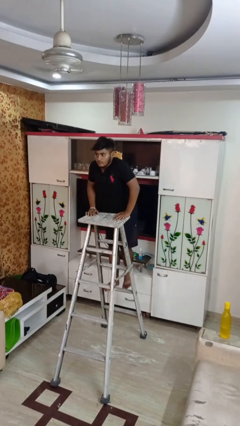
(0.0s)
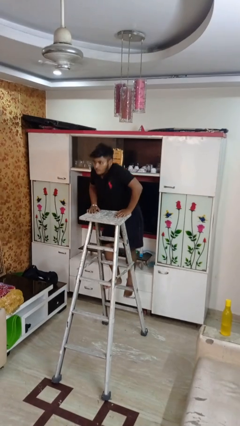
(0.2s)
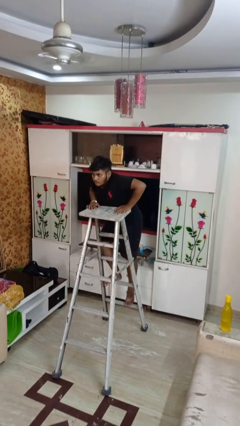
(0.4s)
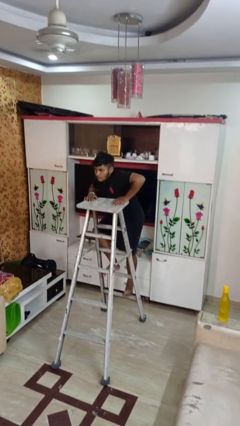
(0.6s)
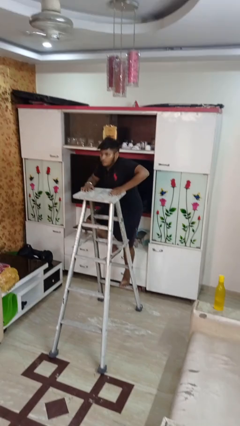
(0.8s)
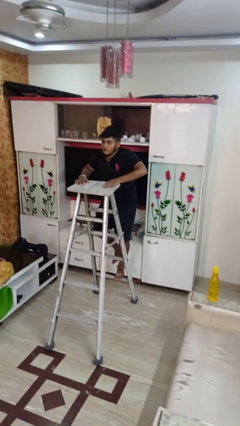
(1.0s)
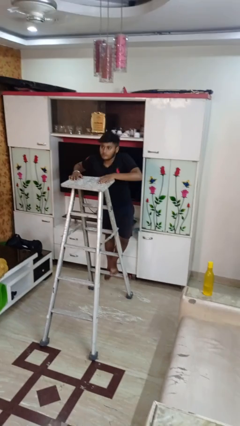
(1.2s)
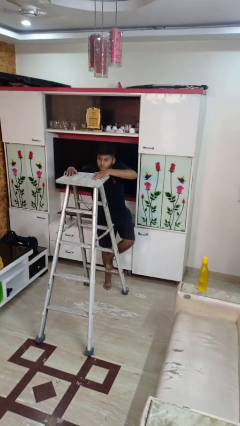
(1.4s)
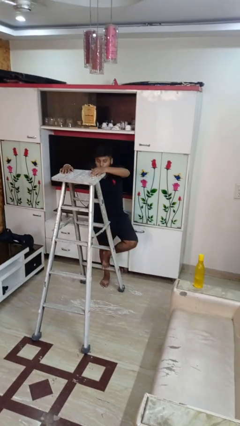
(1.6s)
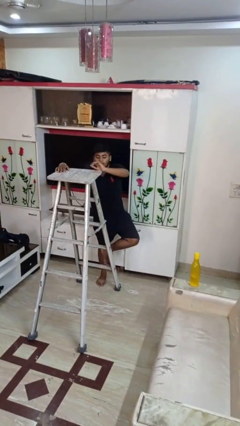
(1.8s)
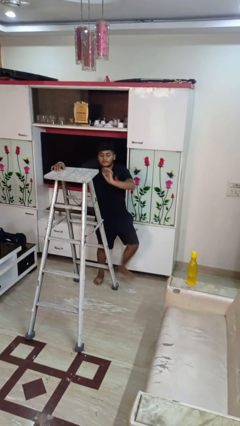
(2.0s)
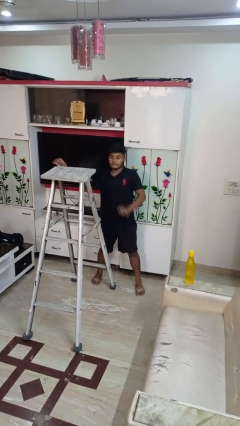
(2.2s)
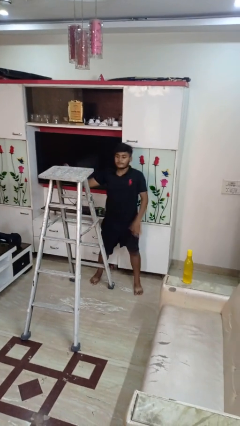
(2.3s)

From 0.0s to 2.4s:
person climbs down ladder

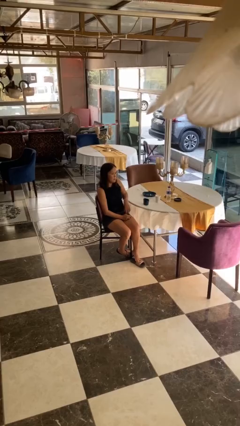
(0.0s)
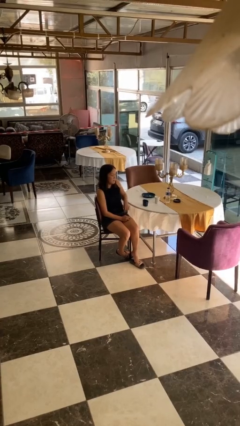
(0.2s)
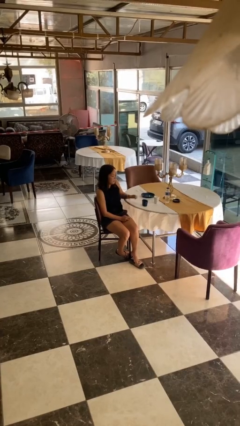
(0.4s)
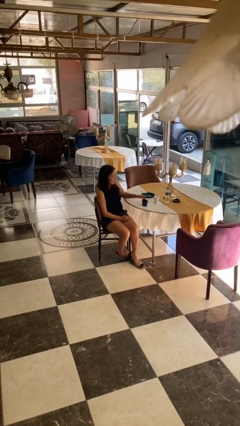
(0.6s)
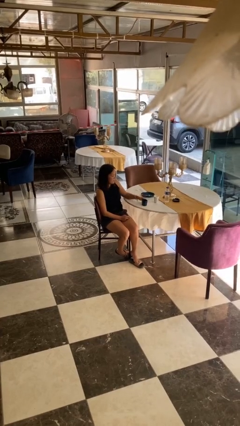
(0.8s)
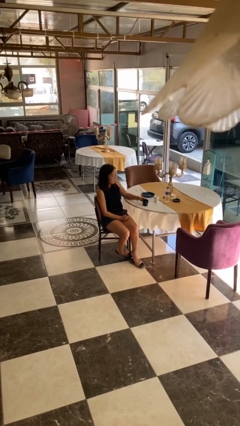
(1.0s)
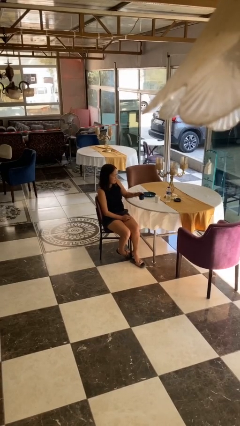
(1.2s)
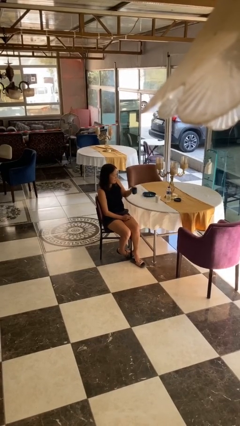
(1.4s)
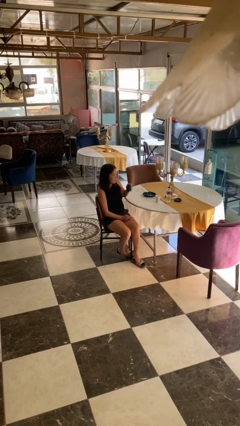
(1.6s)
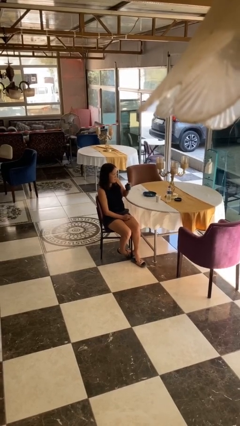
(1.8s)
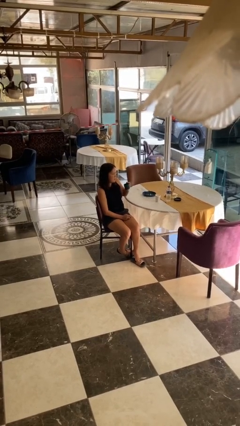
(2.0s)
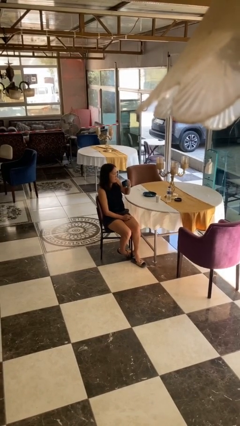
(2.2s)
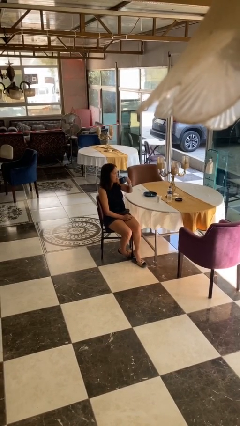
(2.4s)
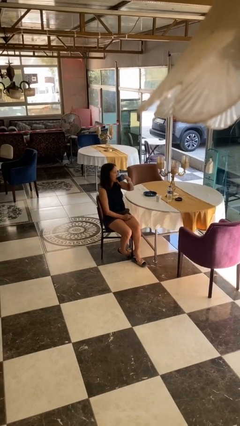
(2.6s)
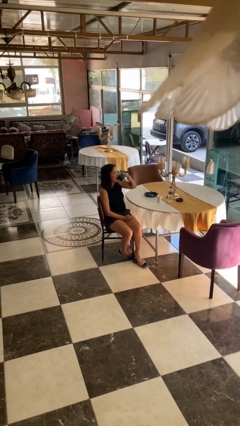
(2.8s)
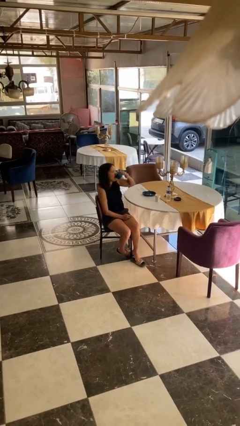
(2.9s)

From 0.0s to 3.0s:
person picks up object from table

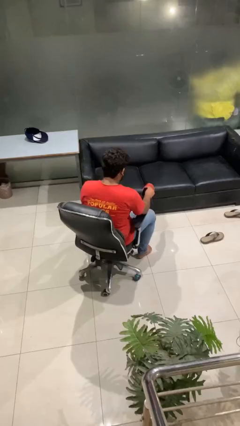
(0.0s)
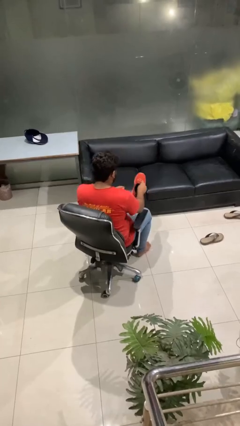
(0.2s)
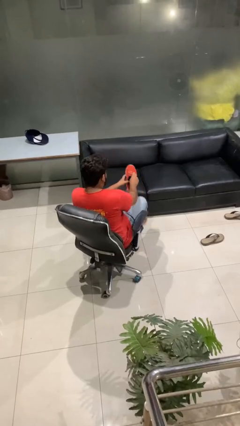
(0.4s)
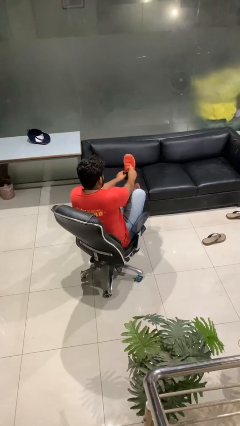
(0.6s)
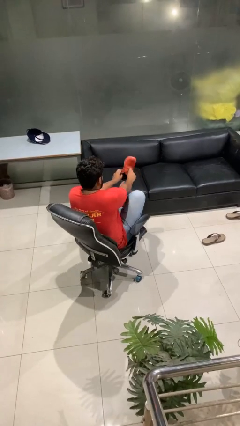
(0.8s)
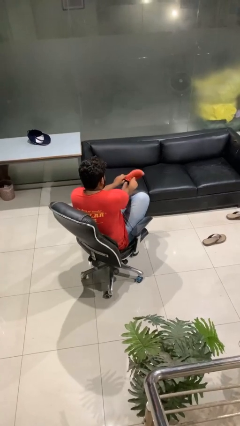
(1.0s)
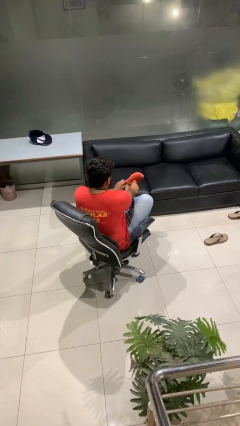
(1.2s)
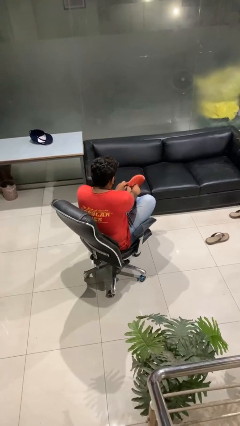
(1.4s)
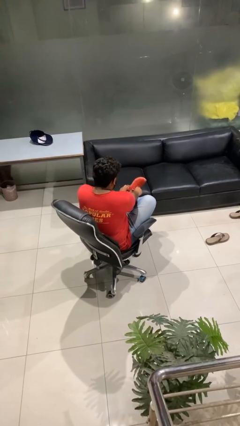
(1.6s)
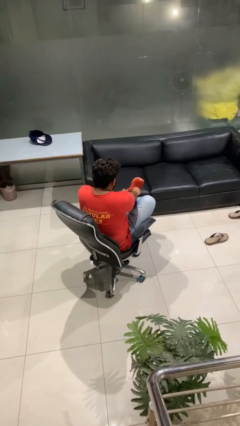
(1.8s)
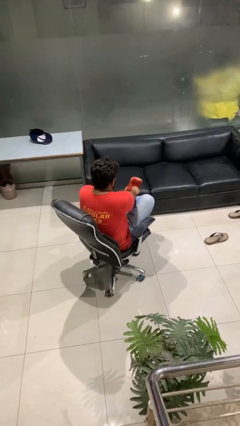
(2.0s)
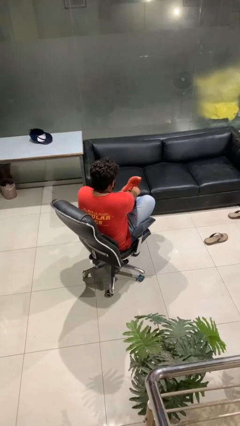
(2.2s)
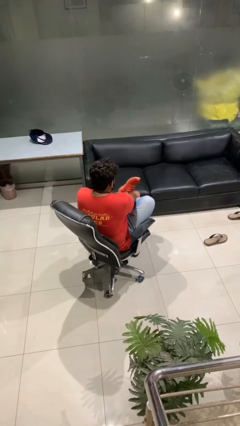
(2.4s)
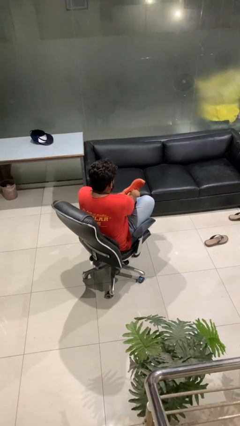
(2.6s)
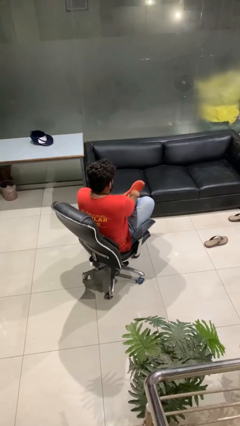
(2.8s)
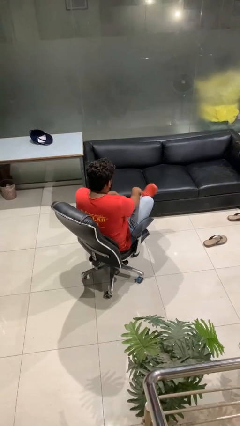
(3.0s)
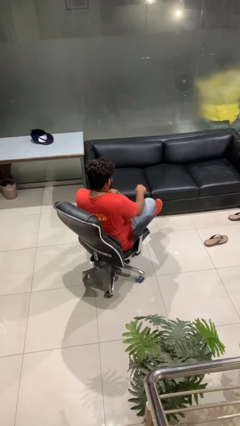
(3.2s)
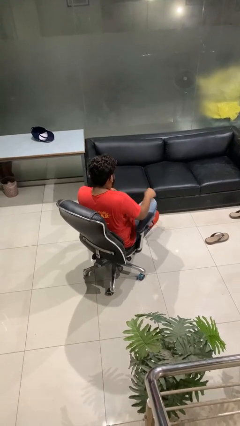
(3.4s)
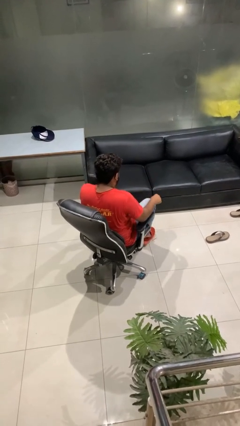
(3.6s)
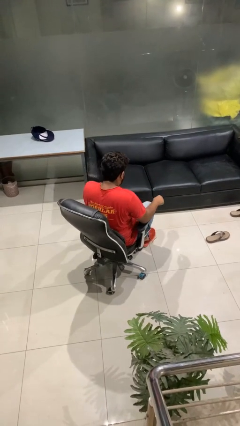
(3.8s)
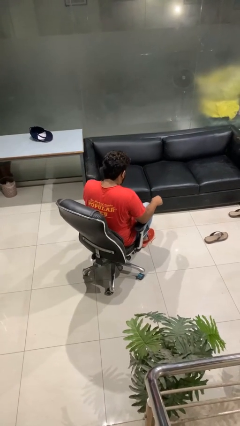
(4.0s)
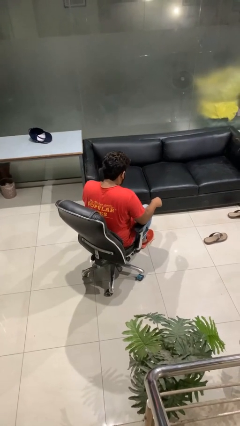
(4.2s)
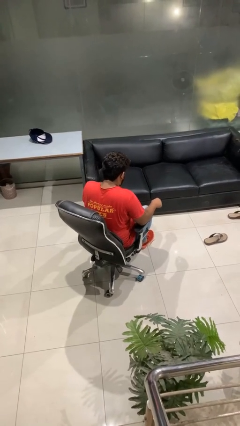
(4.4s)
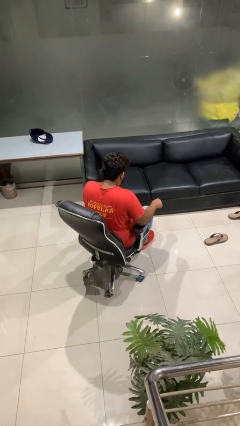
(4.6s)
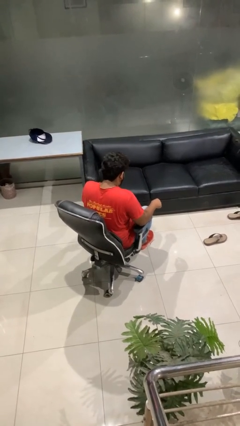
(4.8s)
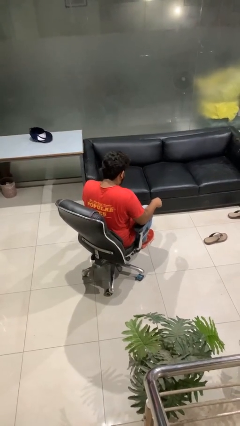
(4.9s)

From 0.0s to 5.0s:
person puts on shoes

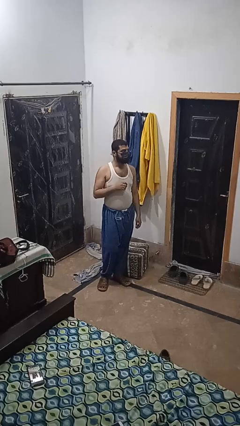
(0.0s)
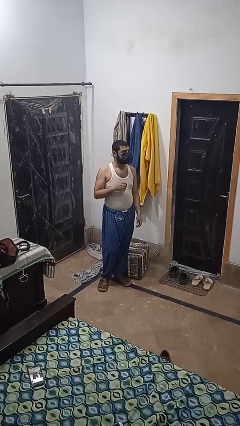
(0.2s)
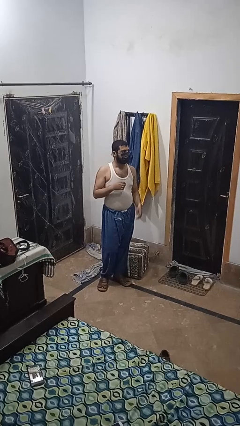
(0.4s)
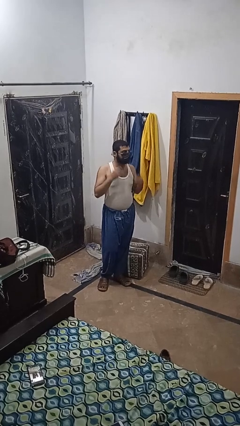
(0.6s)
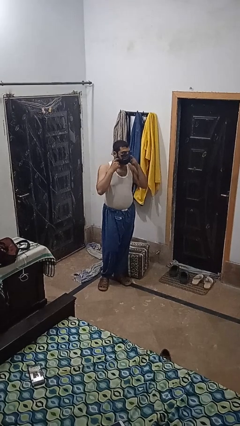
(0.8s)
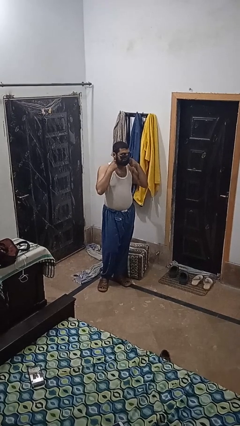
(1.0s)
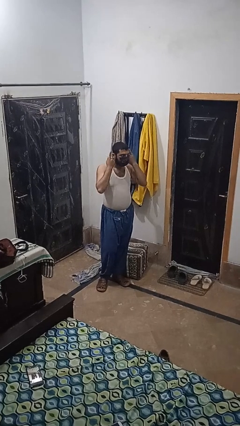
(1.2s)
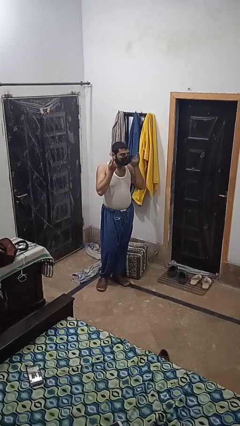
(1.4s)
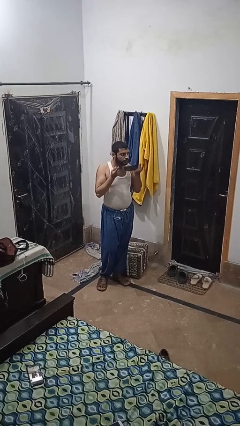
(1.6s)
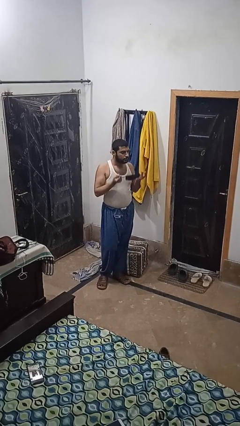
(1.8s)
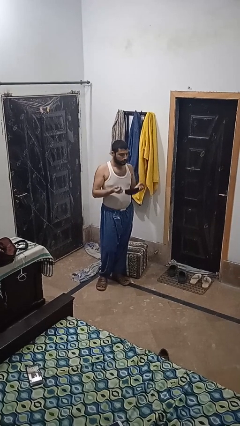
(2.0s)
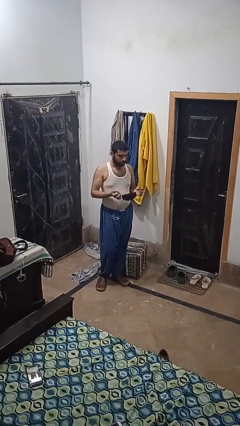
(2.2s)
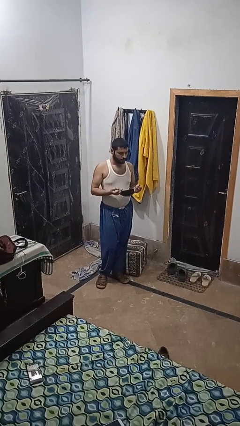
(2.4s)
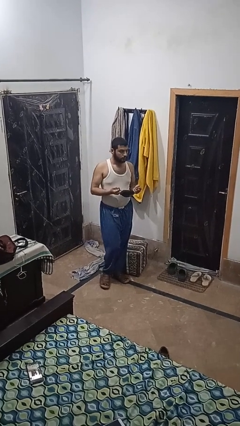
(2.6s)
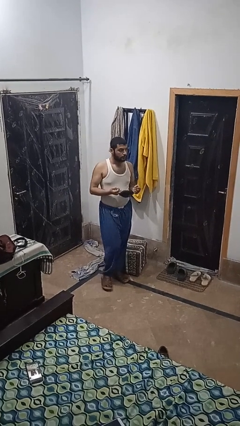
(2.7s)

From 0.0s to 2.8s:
person takes off facemask

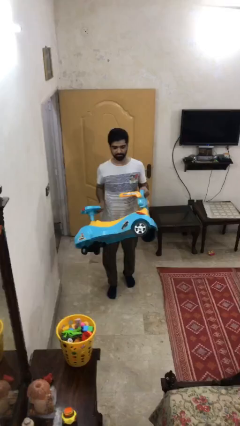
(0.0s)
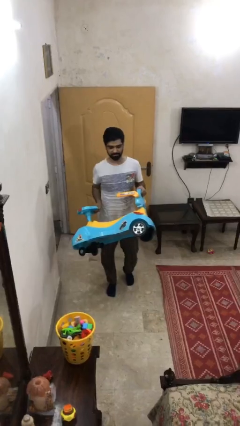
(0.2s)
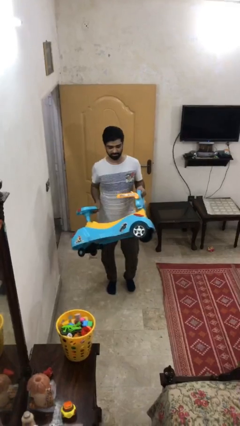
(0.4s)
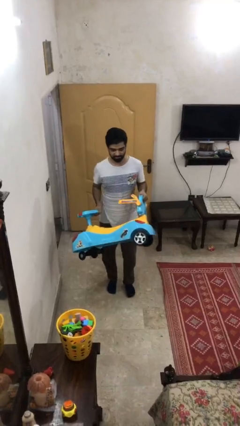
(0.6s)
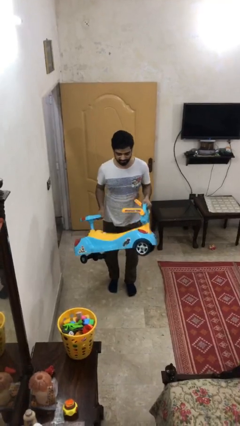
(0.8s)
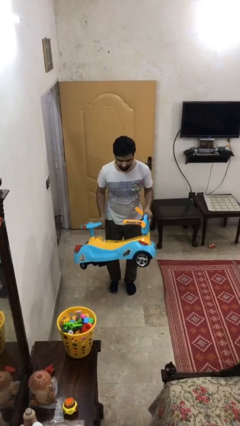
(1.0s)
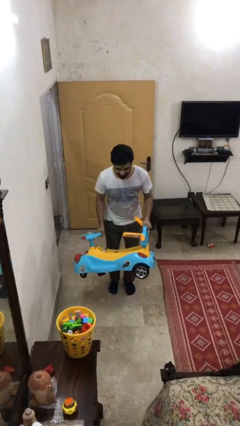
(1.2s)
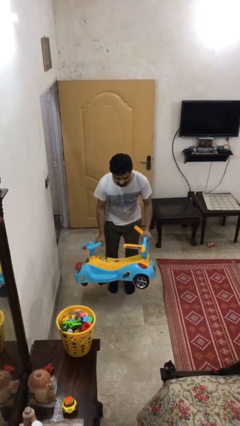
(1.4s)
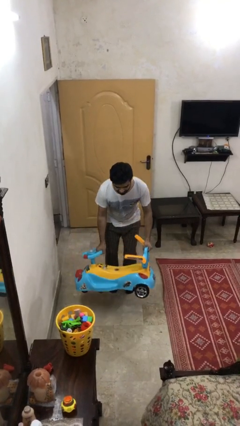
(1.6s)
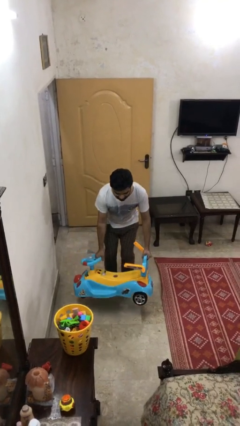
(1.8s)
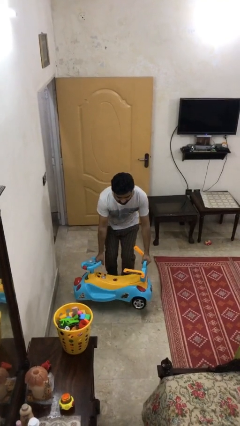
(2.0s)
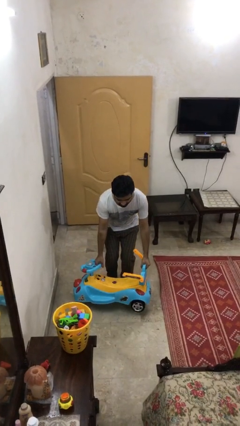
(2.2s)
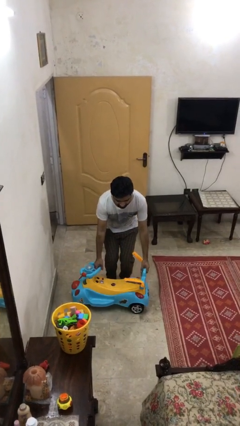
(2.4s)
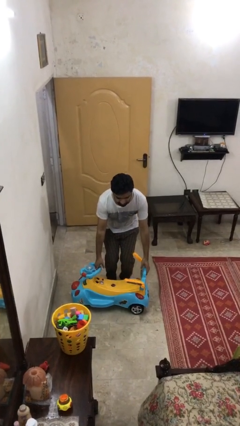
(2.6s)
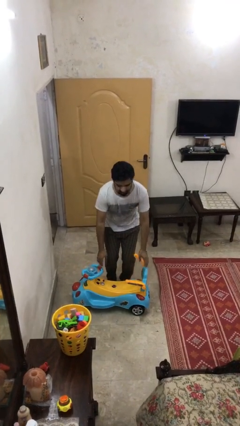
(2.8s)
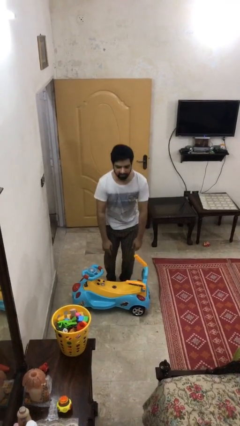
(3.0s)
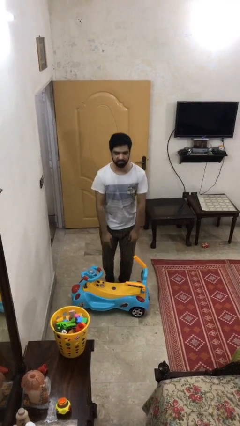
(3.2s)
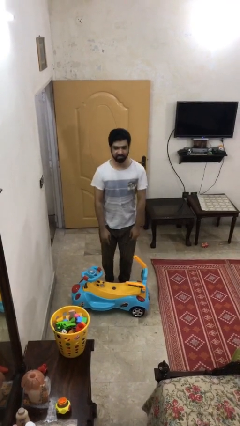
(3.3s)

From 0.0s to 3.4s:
person puts down object on floor

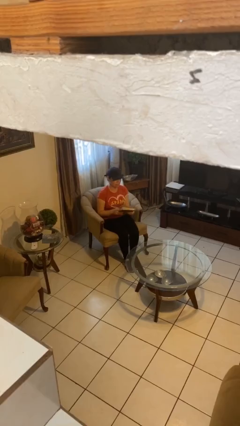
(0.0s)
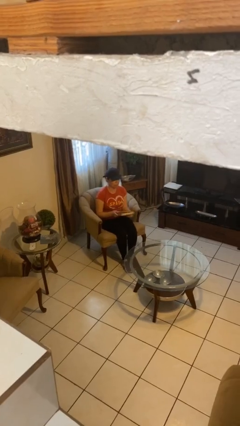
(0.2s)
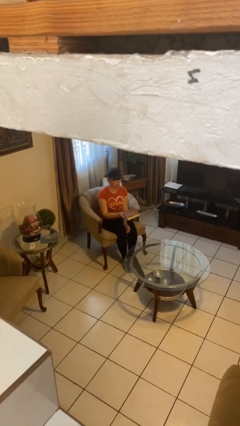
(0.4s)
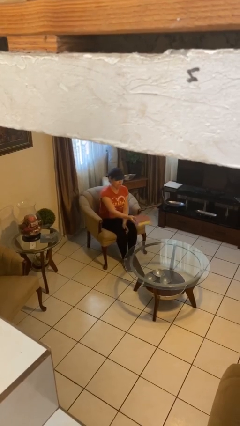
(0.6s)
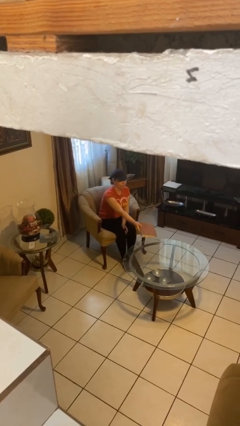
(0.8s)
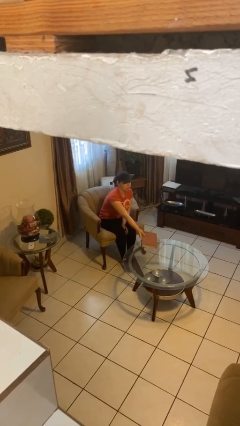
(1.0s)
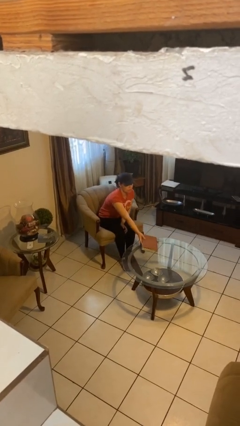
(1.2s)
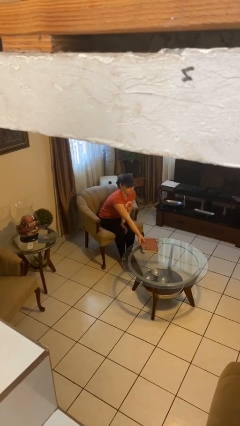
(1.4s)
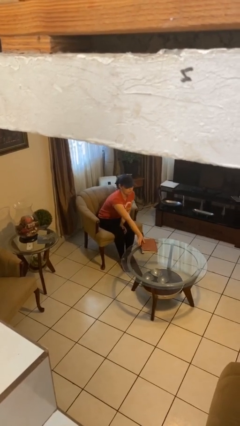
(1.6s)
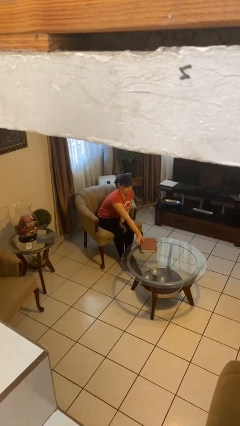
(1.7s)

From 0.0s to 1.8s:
person puts down object on table
